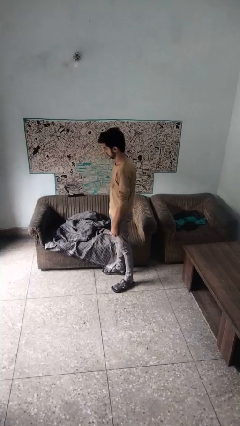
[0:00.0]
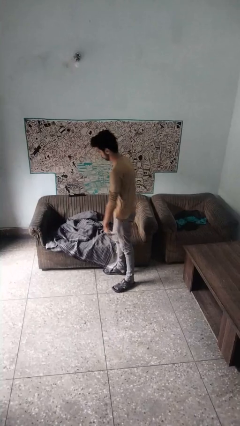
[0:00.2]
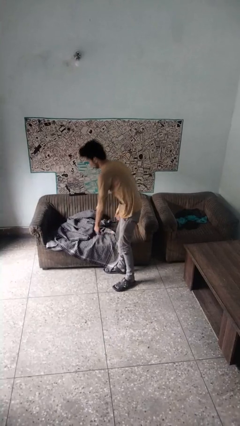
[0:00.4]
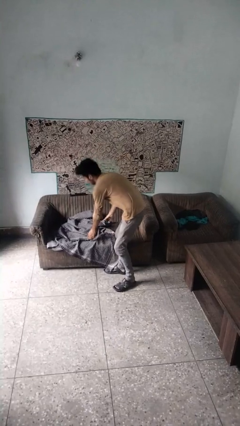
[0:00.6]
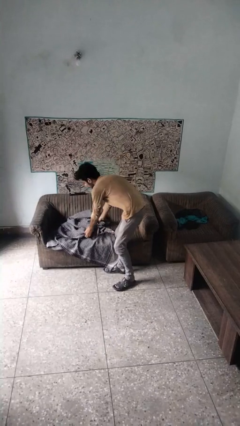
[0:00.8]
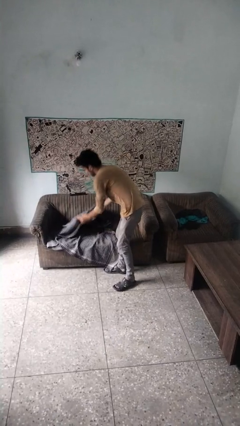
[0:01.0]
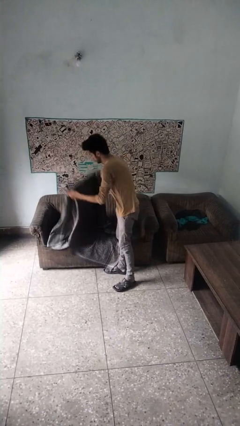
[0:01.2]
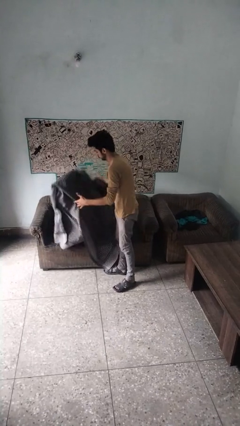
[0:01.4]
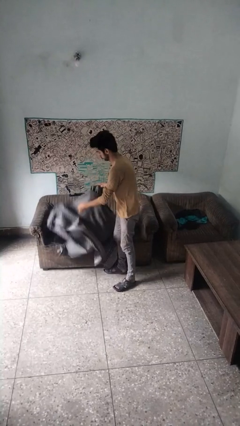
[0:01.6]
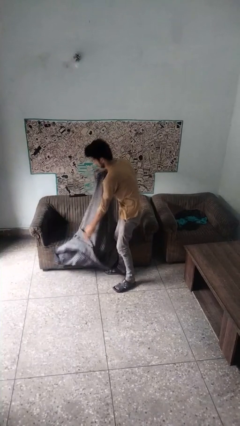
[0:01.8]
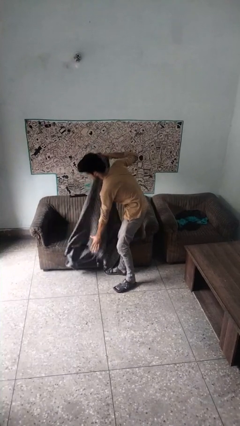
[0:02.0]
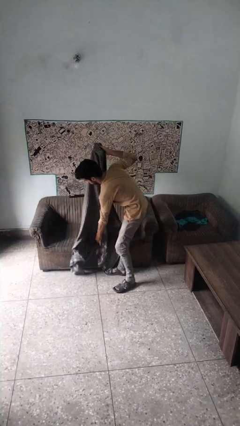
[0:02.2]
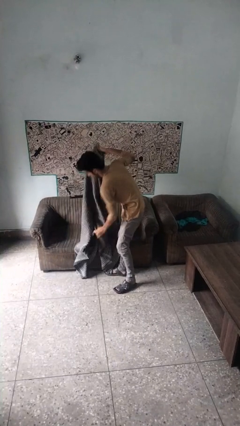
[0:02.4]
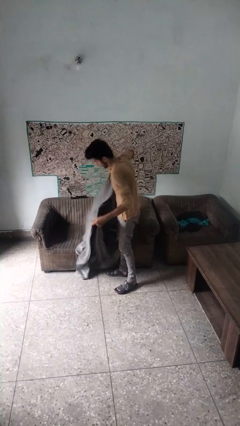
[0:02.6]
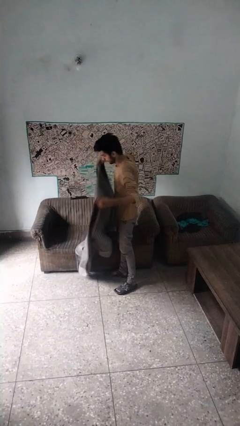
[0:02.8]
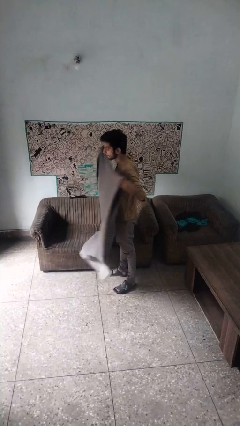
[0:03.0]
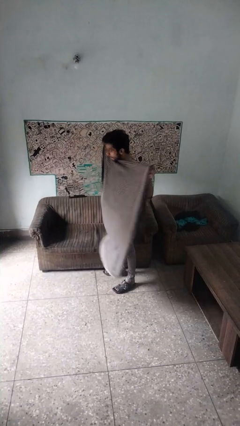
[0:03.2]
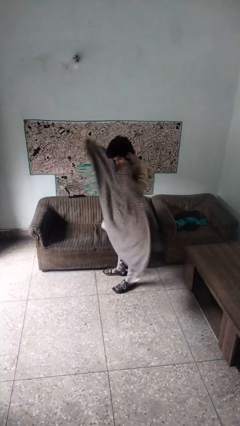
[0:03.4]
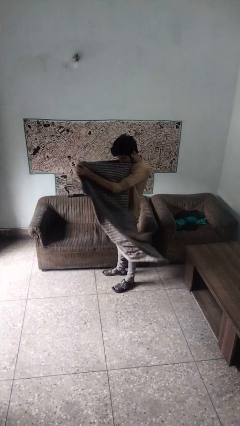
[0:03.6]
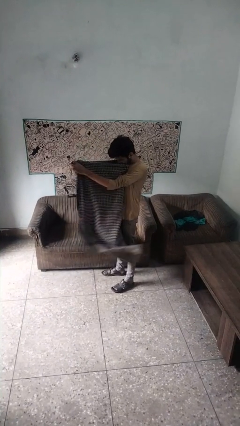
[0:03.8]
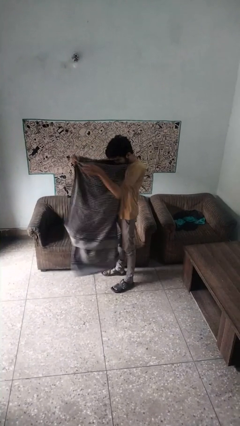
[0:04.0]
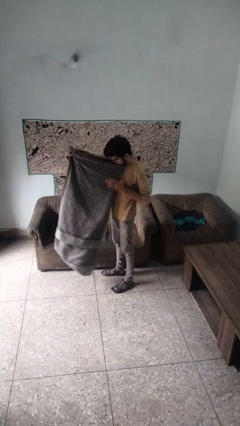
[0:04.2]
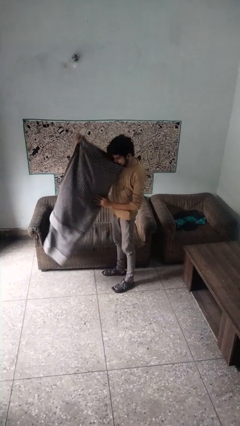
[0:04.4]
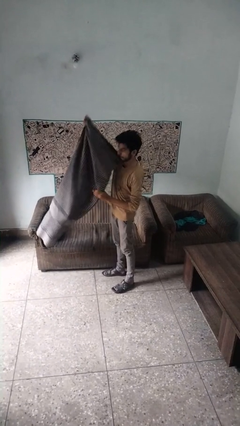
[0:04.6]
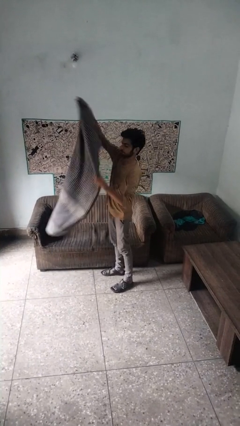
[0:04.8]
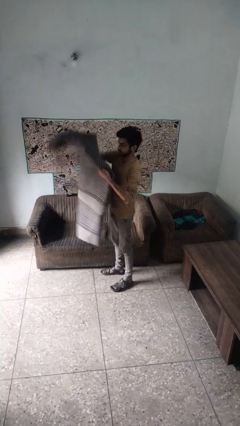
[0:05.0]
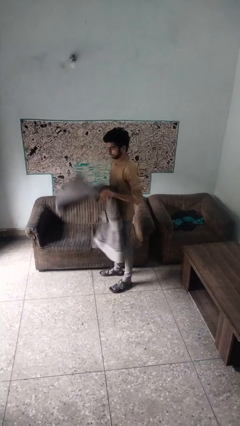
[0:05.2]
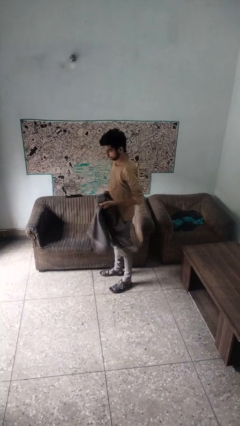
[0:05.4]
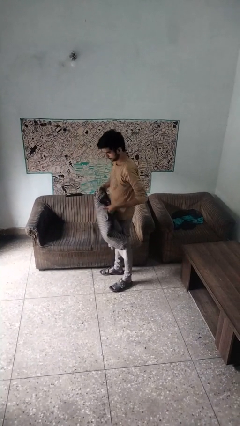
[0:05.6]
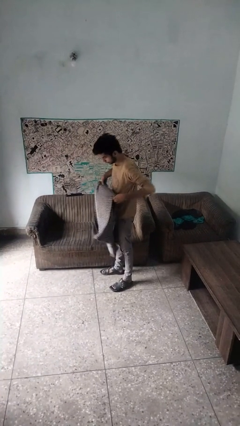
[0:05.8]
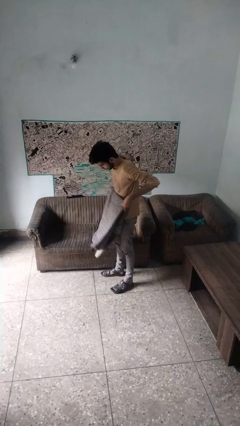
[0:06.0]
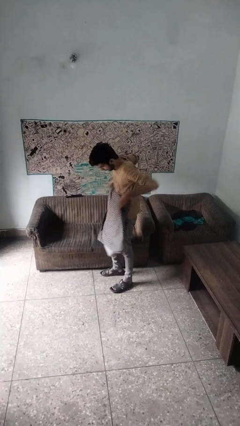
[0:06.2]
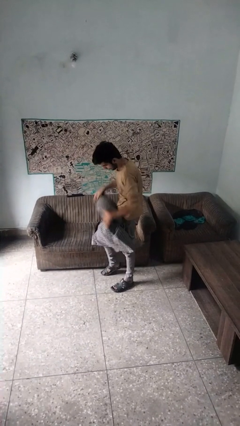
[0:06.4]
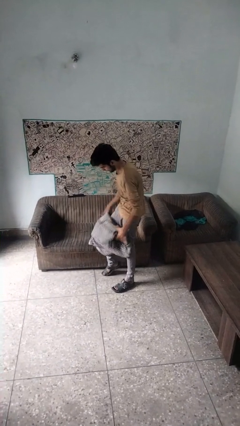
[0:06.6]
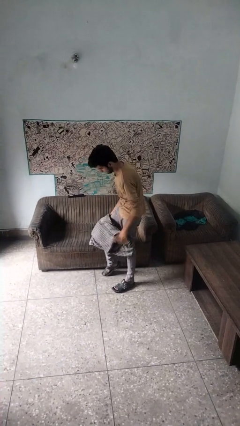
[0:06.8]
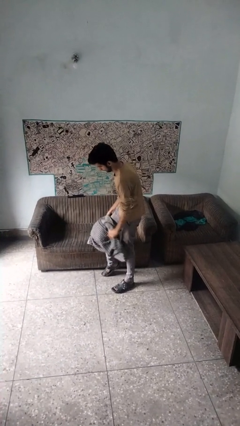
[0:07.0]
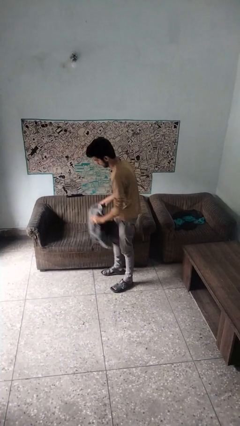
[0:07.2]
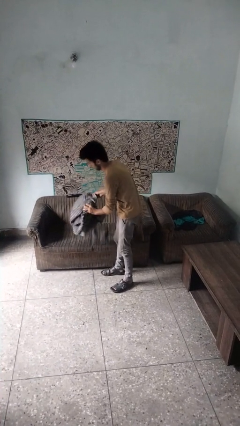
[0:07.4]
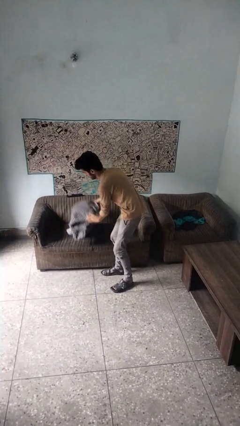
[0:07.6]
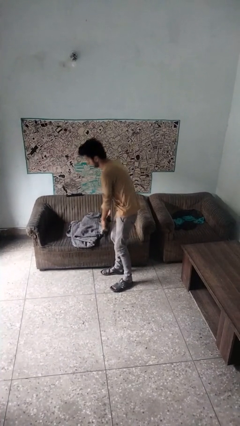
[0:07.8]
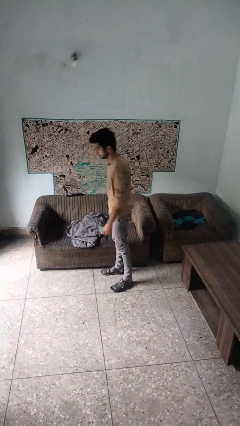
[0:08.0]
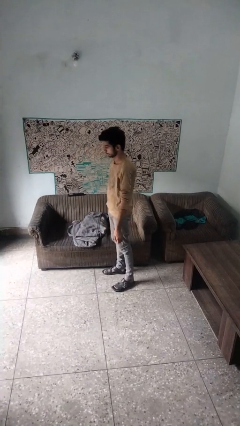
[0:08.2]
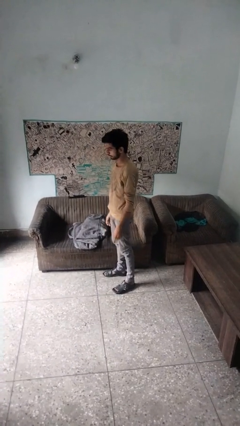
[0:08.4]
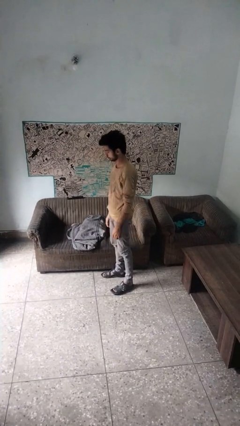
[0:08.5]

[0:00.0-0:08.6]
person folds blanket

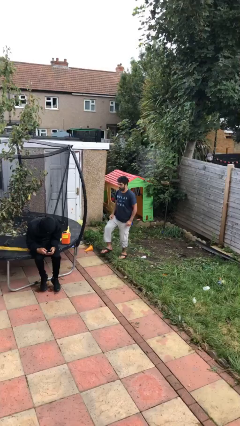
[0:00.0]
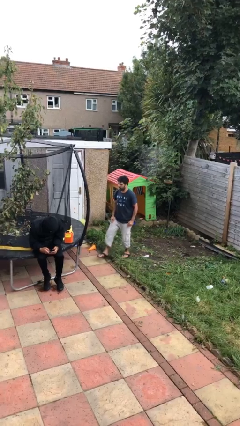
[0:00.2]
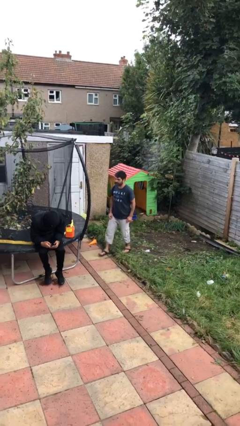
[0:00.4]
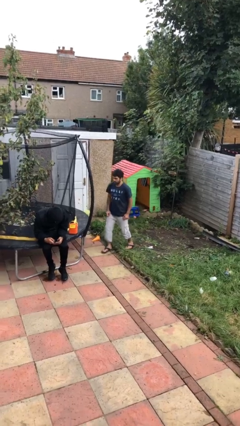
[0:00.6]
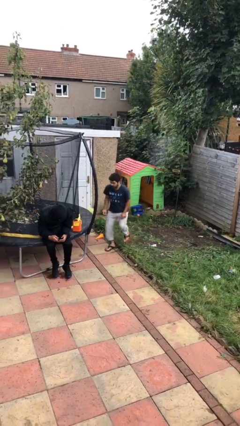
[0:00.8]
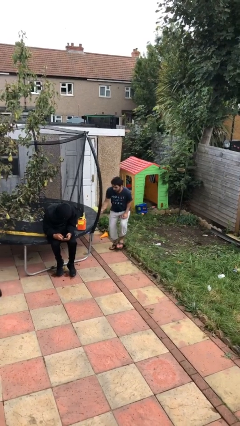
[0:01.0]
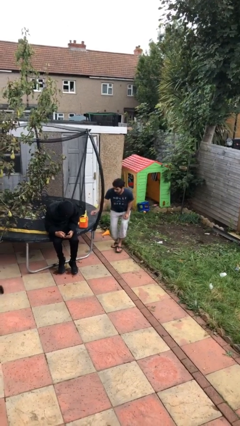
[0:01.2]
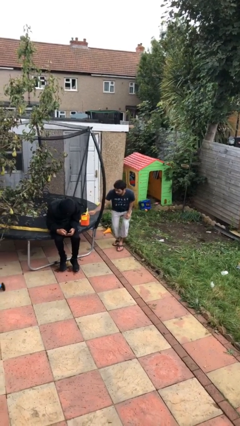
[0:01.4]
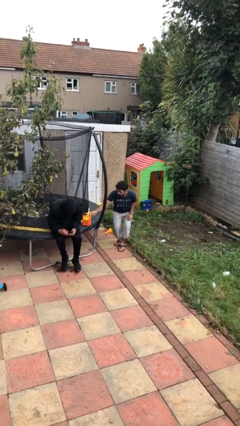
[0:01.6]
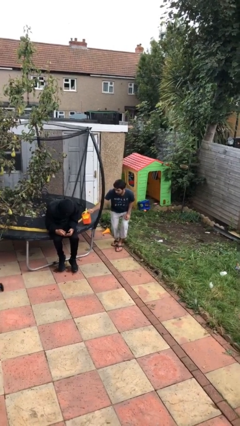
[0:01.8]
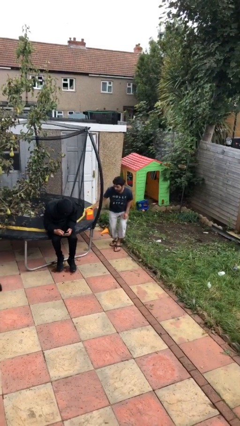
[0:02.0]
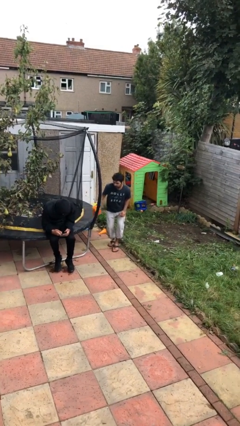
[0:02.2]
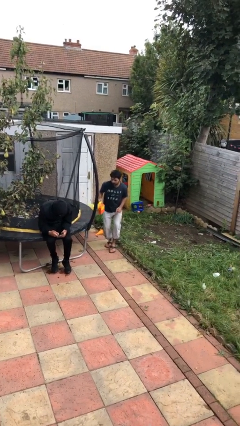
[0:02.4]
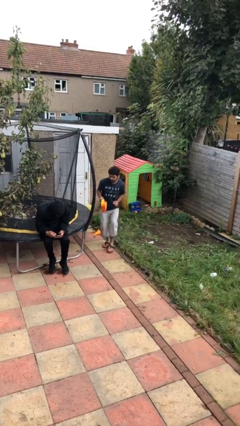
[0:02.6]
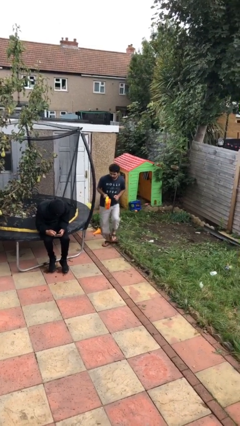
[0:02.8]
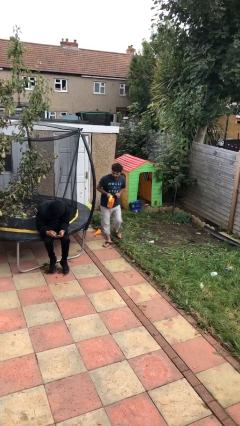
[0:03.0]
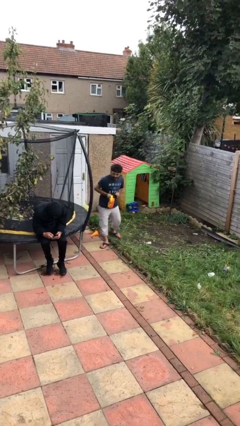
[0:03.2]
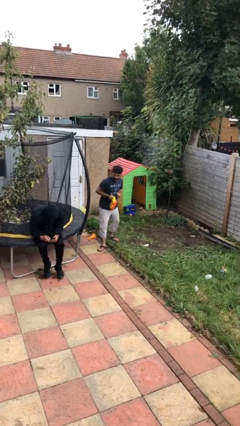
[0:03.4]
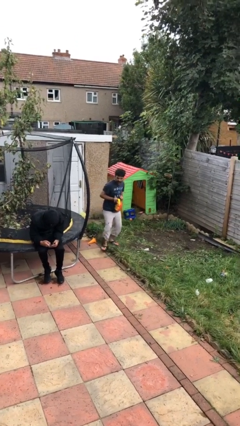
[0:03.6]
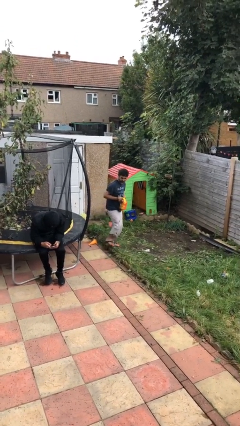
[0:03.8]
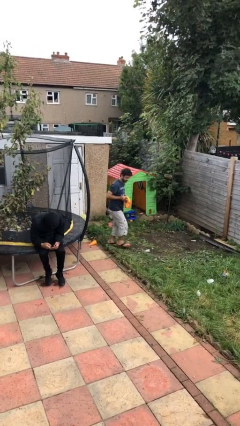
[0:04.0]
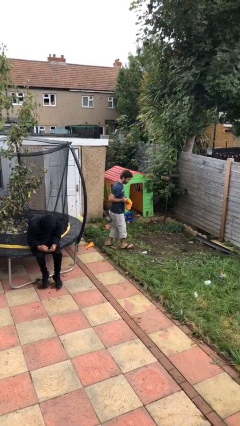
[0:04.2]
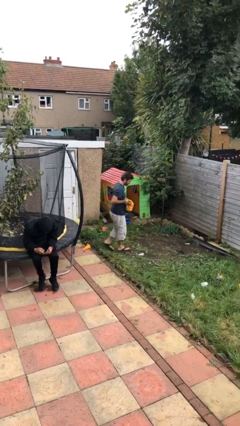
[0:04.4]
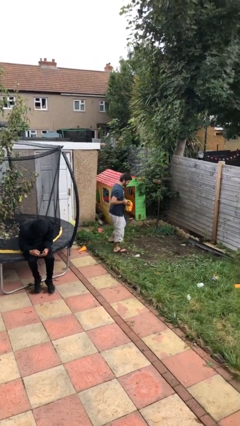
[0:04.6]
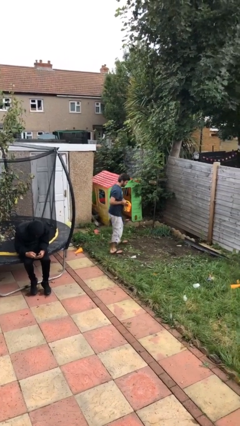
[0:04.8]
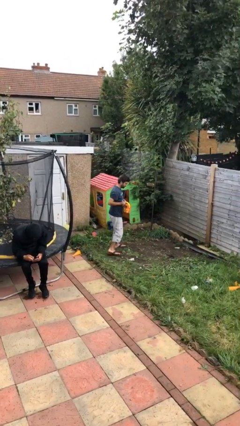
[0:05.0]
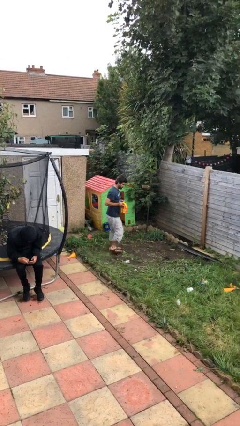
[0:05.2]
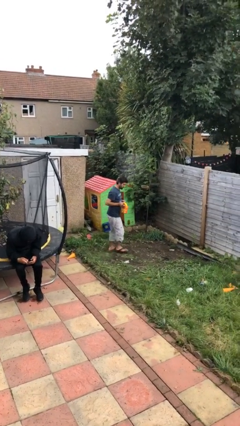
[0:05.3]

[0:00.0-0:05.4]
person steals object from person

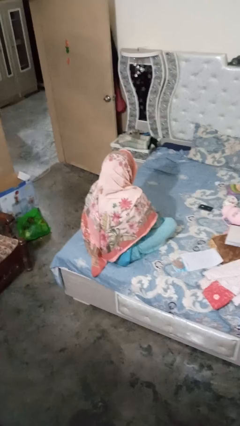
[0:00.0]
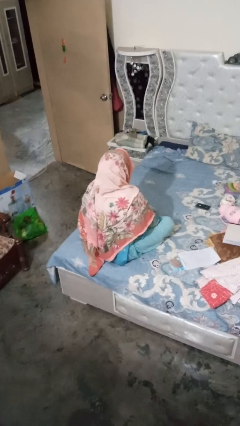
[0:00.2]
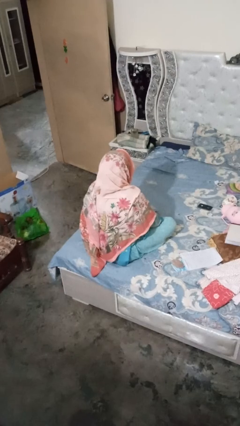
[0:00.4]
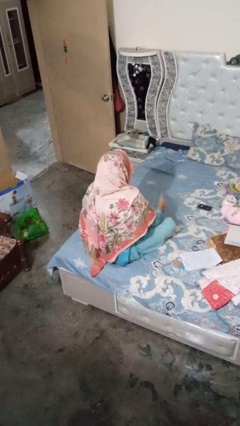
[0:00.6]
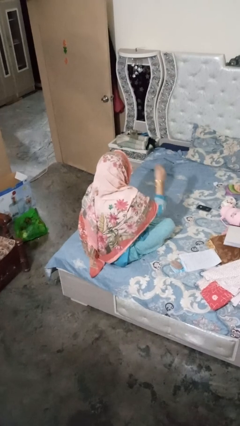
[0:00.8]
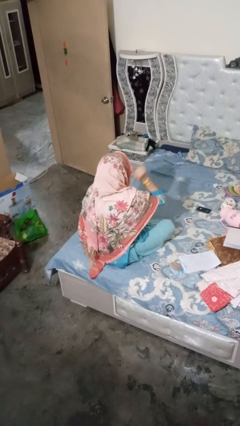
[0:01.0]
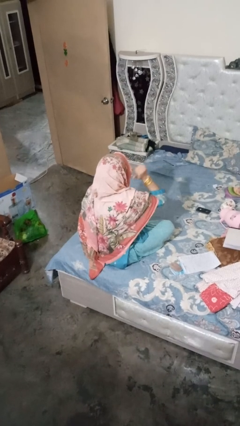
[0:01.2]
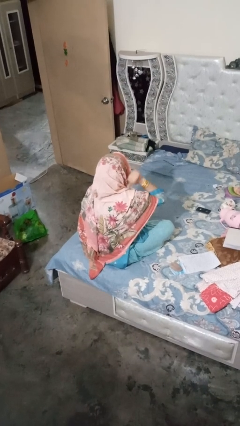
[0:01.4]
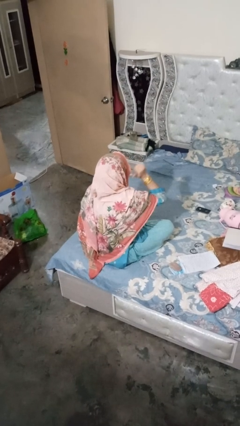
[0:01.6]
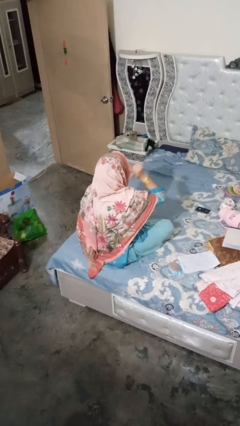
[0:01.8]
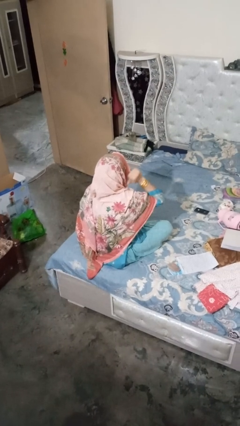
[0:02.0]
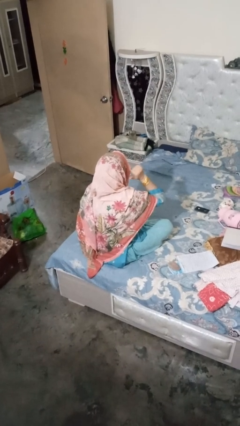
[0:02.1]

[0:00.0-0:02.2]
person gestures behind me

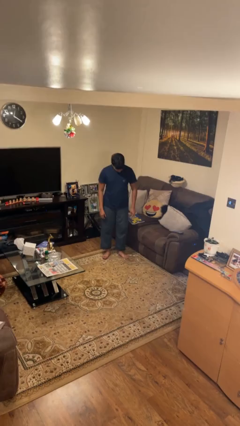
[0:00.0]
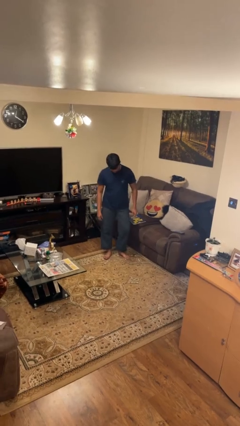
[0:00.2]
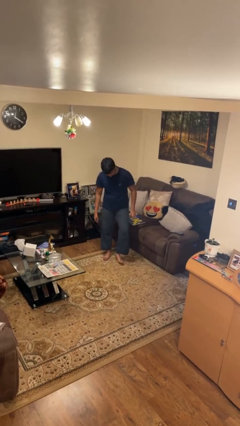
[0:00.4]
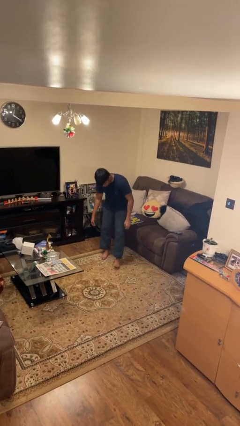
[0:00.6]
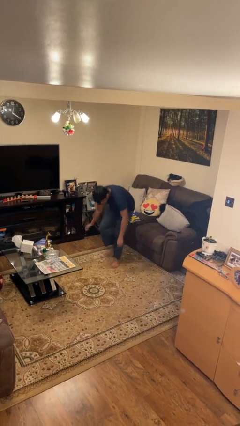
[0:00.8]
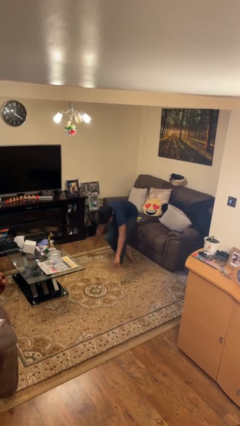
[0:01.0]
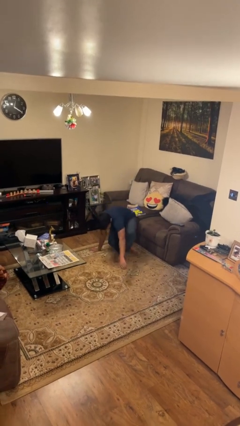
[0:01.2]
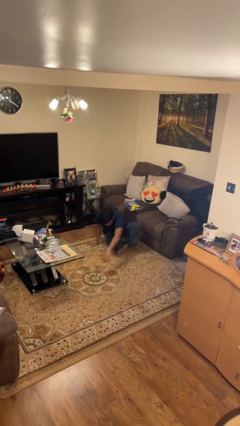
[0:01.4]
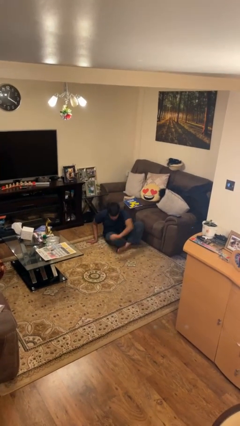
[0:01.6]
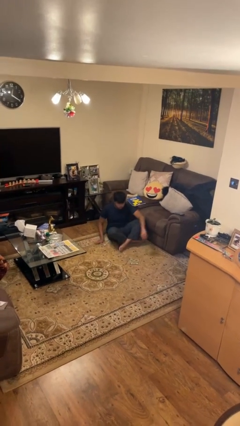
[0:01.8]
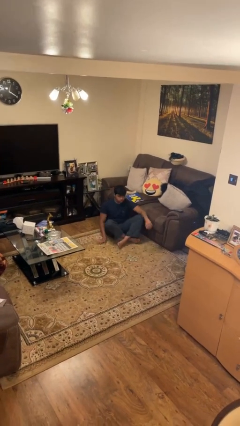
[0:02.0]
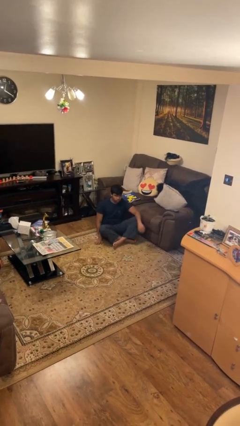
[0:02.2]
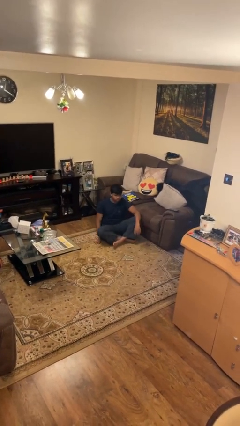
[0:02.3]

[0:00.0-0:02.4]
person sits crisscross
